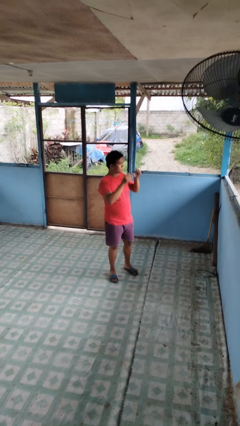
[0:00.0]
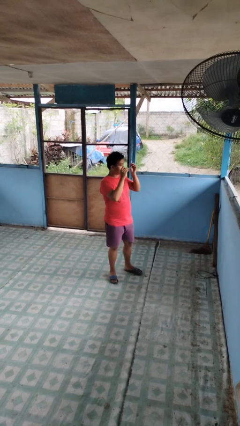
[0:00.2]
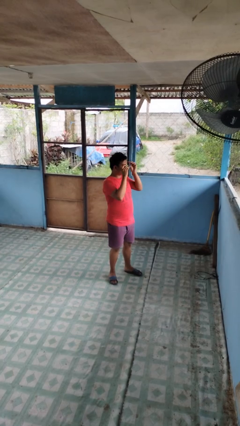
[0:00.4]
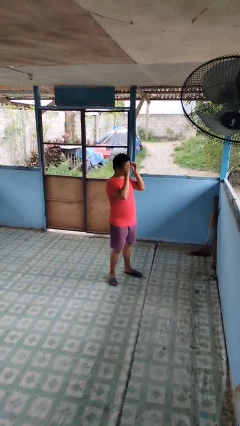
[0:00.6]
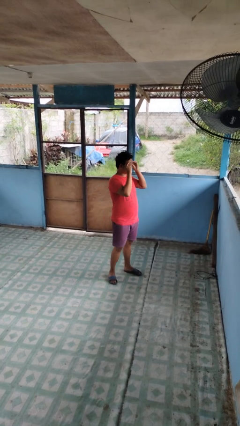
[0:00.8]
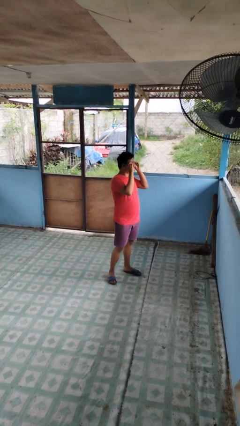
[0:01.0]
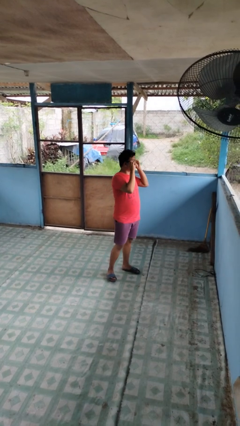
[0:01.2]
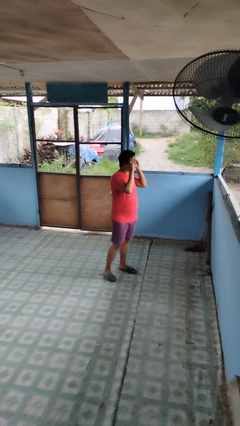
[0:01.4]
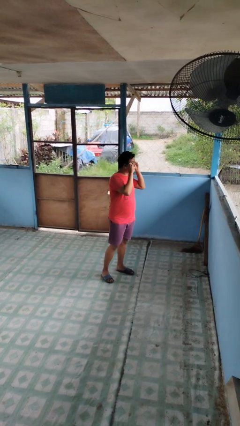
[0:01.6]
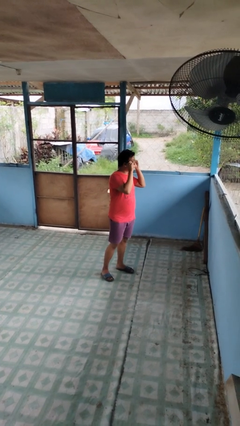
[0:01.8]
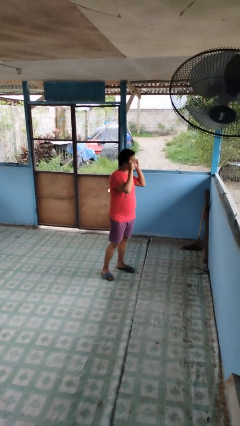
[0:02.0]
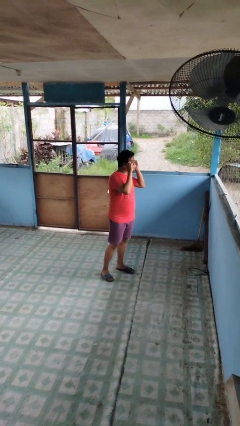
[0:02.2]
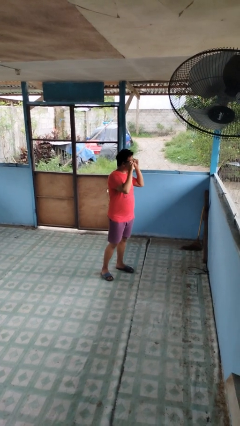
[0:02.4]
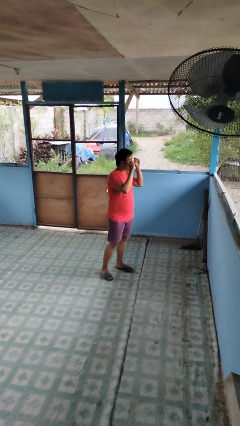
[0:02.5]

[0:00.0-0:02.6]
person puts on glasses

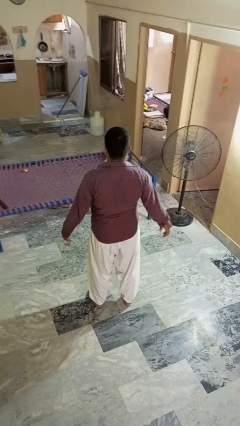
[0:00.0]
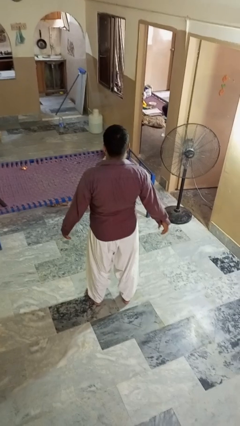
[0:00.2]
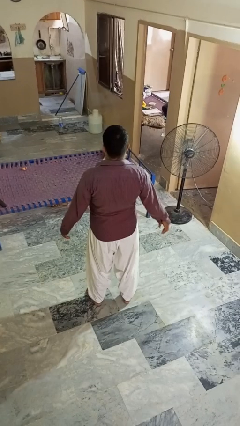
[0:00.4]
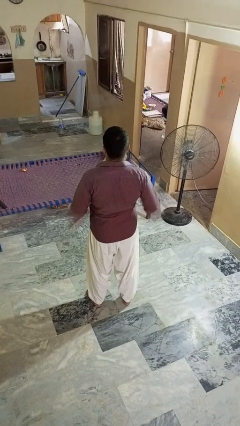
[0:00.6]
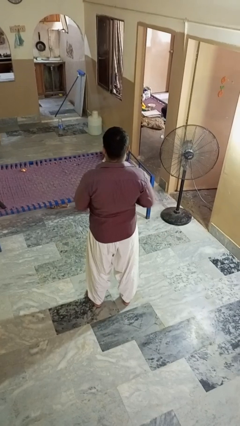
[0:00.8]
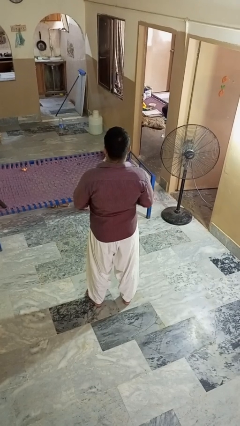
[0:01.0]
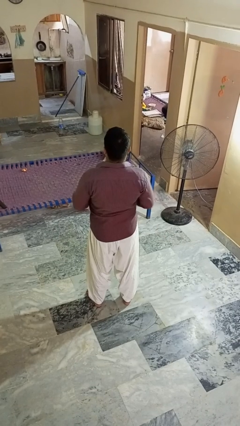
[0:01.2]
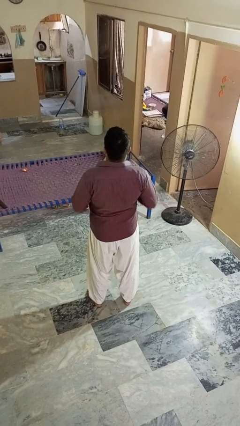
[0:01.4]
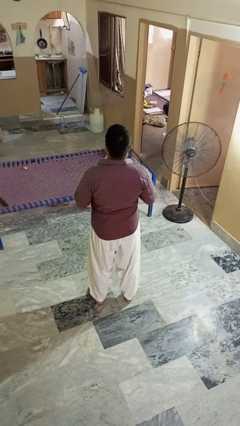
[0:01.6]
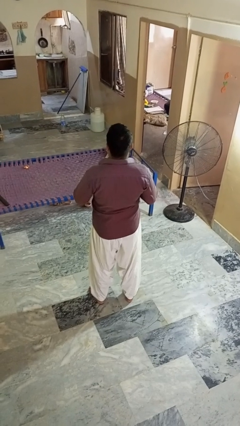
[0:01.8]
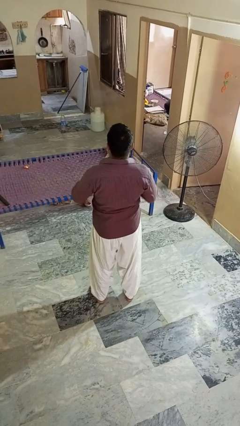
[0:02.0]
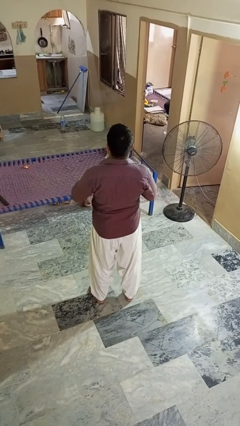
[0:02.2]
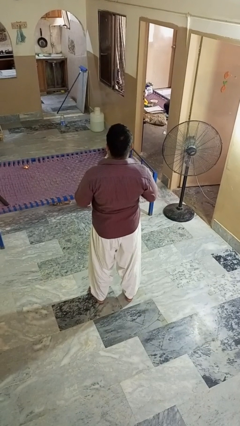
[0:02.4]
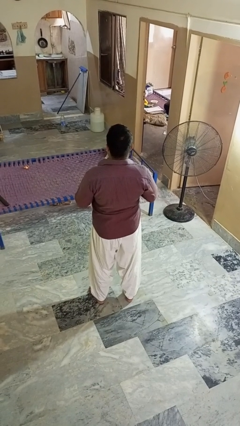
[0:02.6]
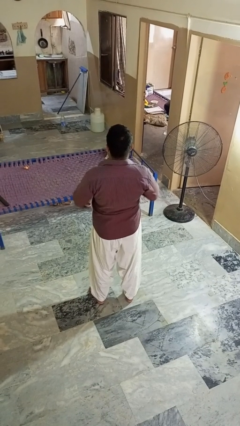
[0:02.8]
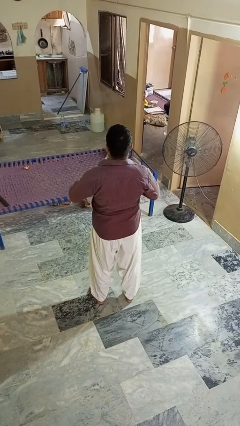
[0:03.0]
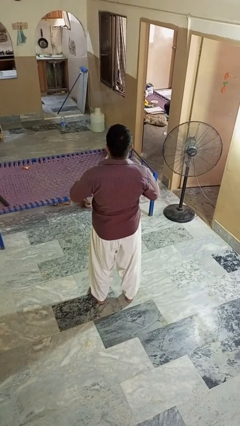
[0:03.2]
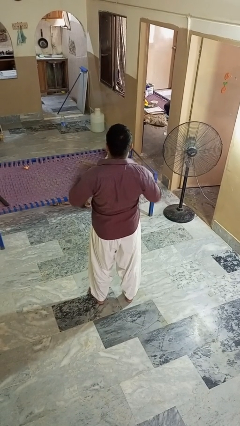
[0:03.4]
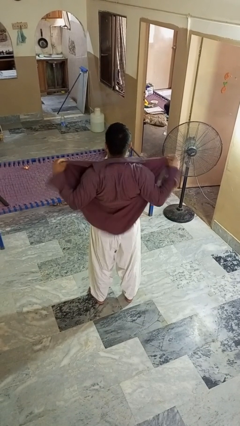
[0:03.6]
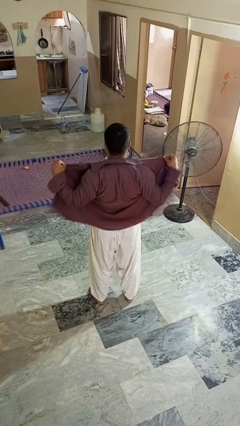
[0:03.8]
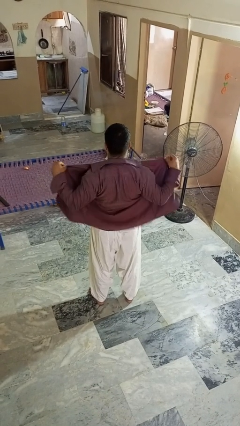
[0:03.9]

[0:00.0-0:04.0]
person unbuttons shirt

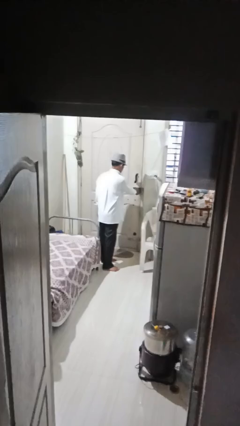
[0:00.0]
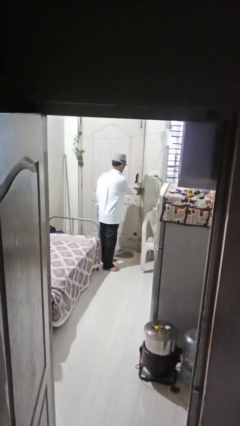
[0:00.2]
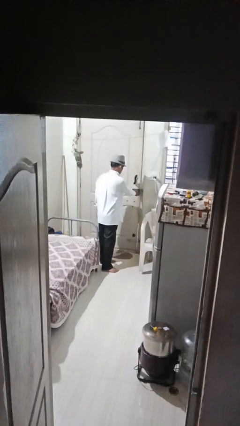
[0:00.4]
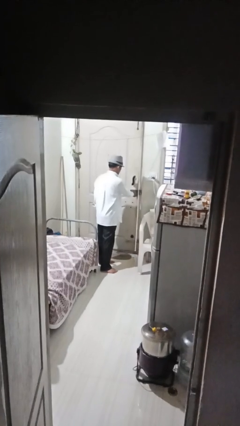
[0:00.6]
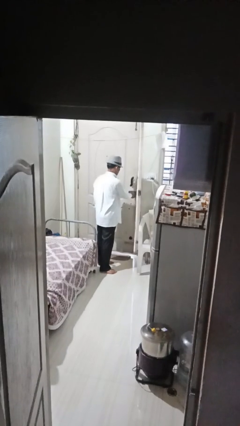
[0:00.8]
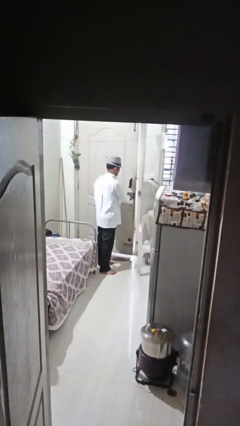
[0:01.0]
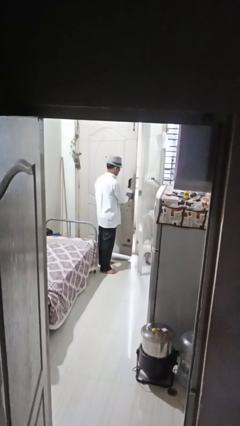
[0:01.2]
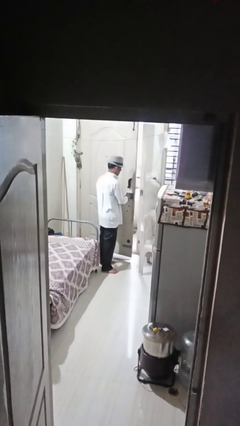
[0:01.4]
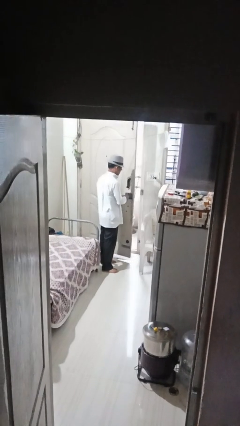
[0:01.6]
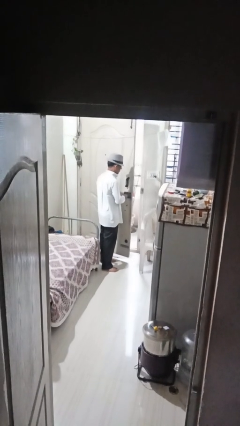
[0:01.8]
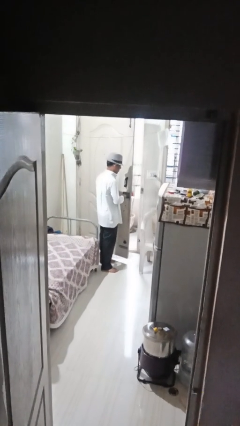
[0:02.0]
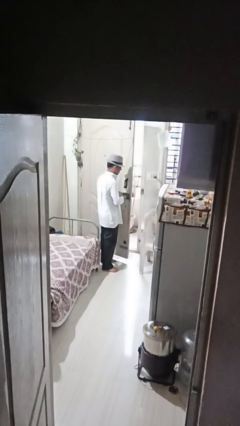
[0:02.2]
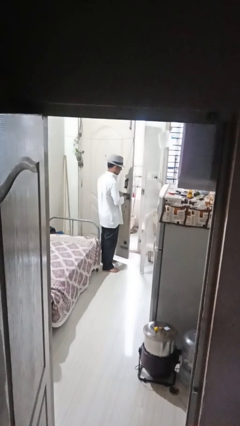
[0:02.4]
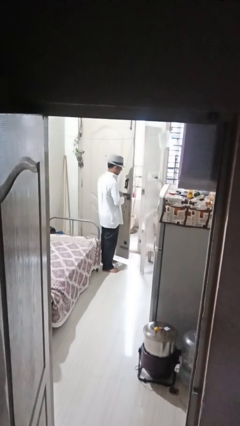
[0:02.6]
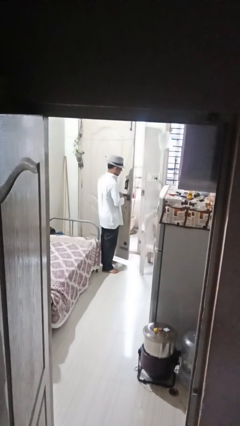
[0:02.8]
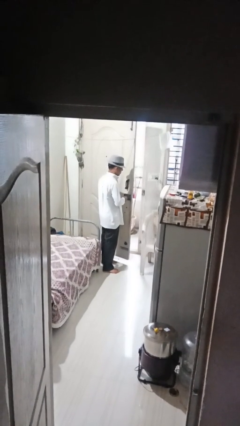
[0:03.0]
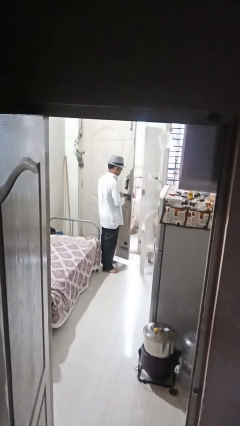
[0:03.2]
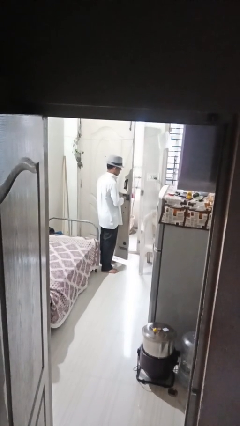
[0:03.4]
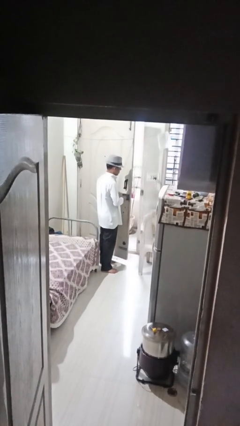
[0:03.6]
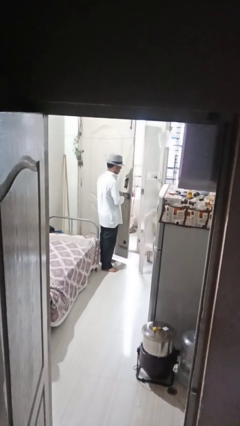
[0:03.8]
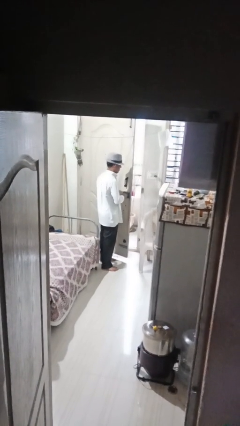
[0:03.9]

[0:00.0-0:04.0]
person opens facility door

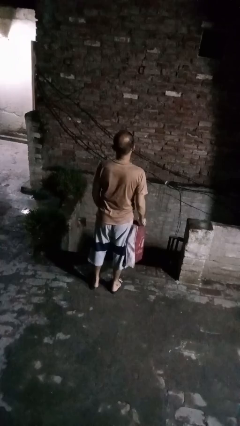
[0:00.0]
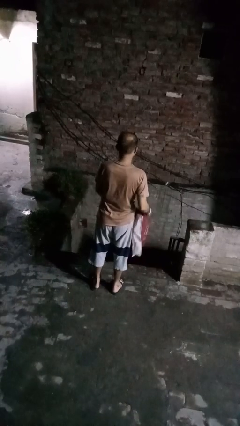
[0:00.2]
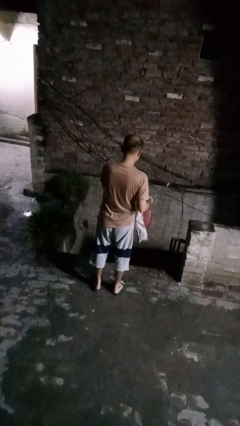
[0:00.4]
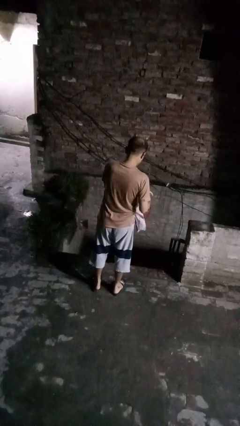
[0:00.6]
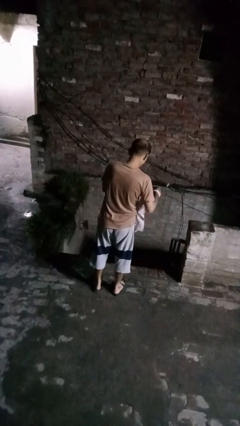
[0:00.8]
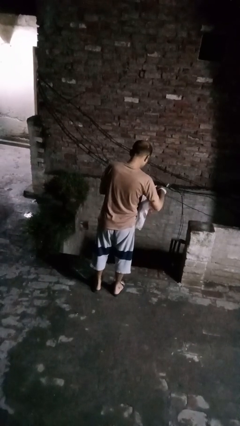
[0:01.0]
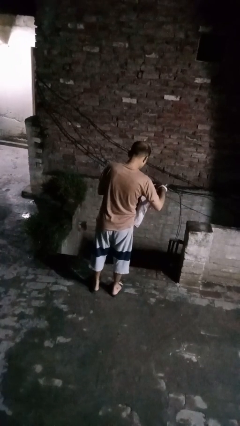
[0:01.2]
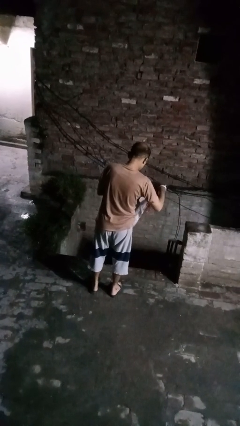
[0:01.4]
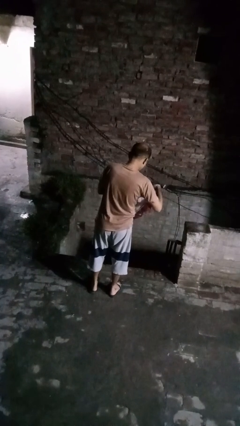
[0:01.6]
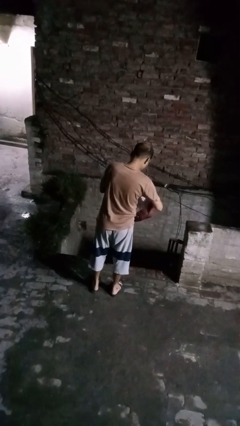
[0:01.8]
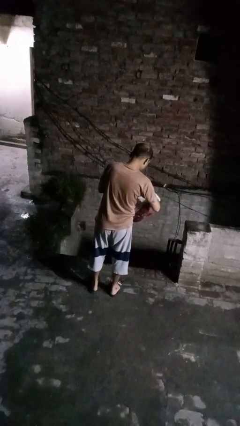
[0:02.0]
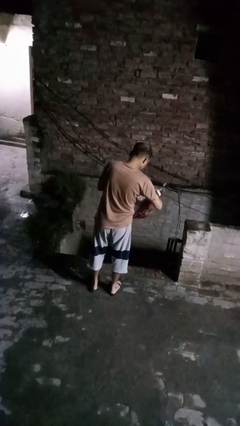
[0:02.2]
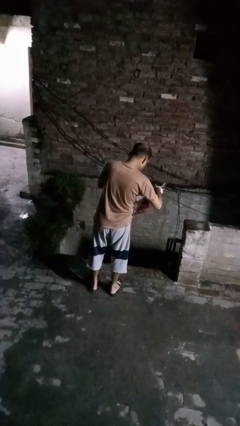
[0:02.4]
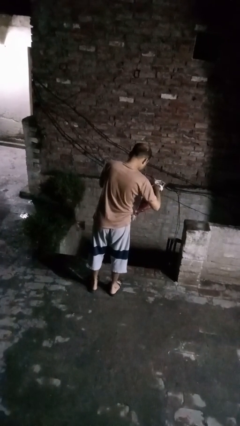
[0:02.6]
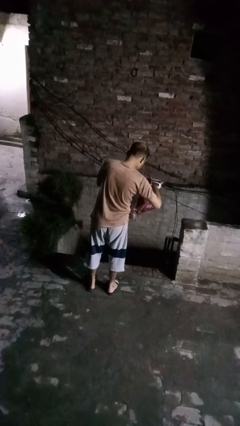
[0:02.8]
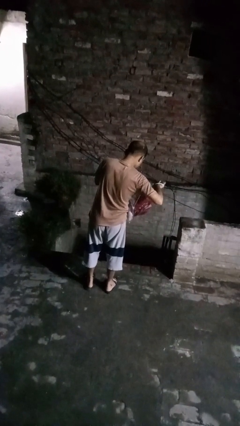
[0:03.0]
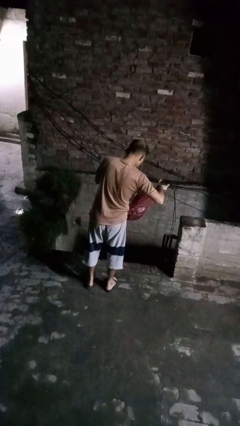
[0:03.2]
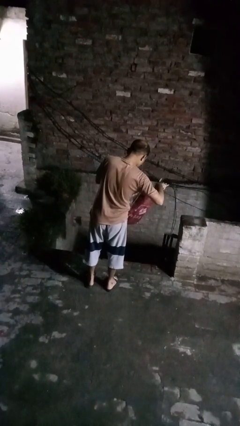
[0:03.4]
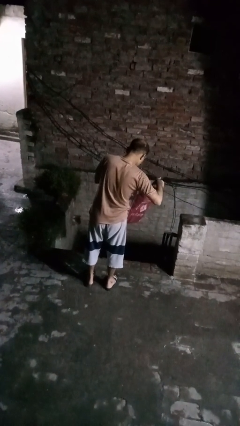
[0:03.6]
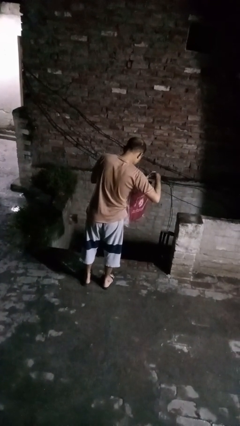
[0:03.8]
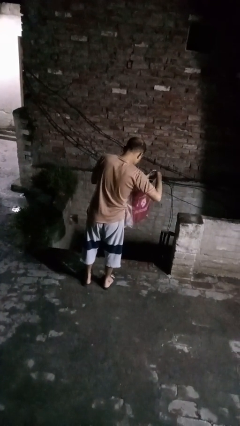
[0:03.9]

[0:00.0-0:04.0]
person searches in bag

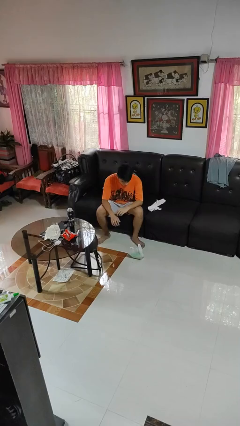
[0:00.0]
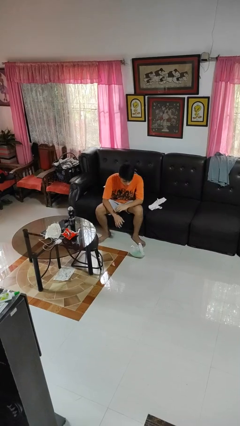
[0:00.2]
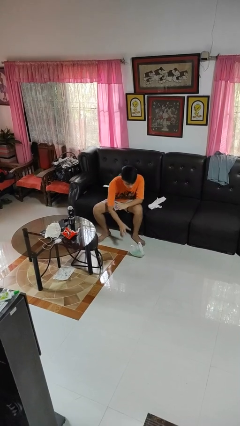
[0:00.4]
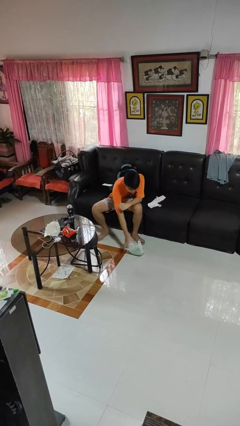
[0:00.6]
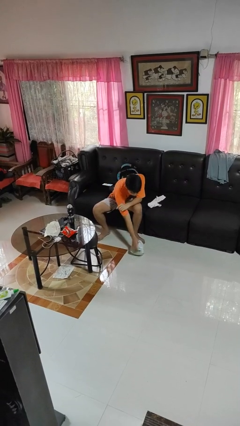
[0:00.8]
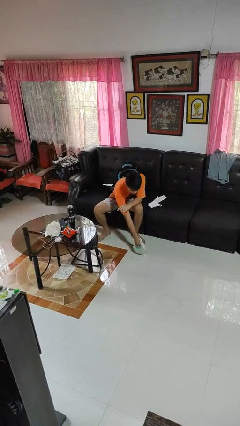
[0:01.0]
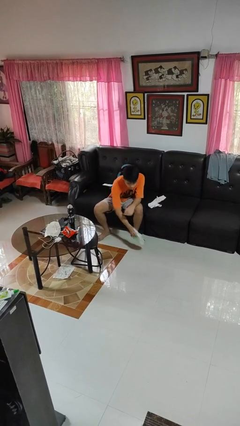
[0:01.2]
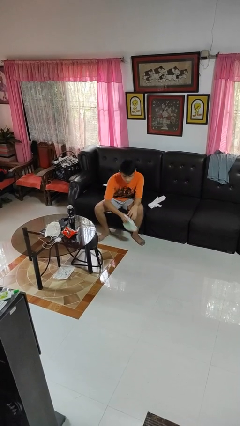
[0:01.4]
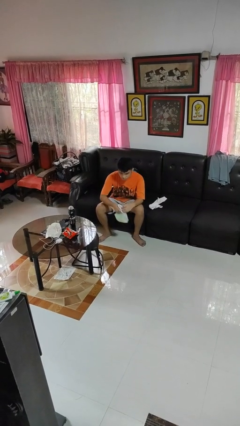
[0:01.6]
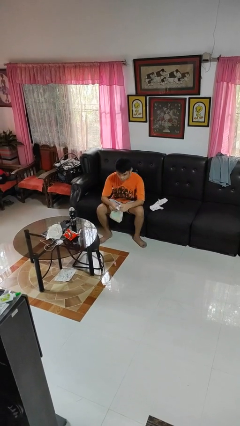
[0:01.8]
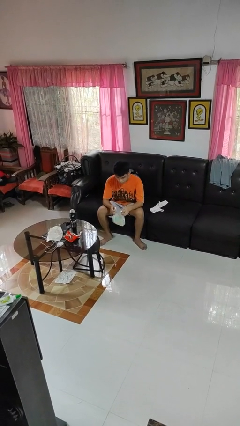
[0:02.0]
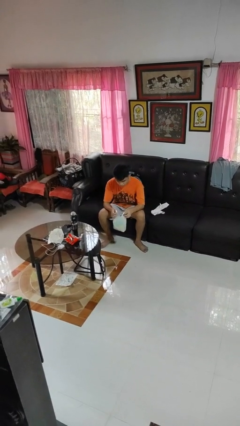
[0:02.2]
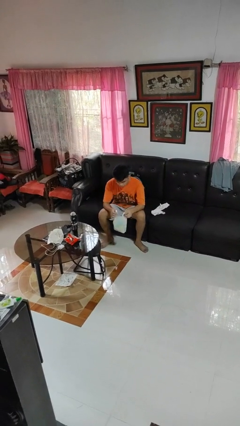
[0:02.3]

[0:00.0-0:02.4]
person picks up object from floor

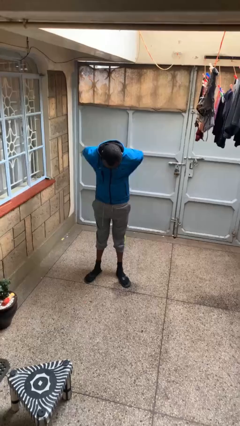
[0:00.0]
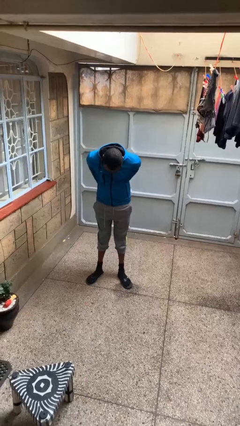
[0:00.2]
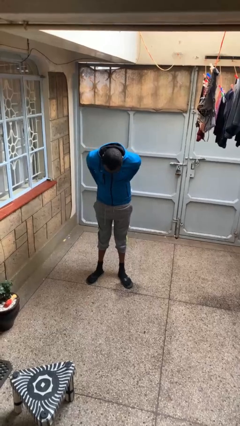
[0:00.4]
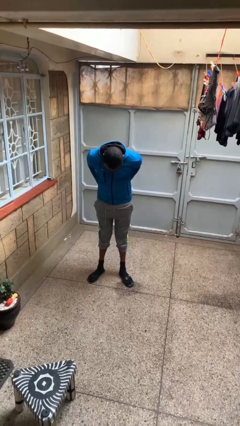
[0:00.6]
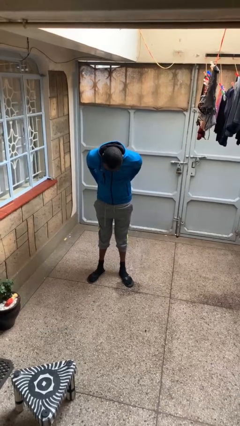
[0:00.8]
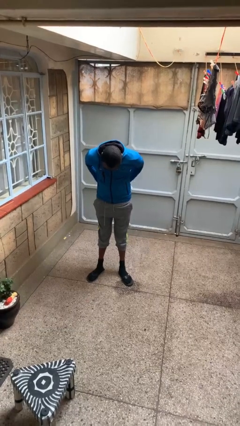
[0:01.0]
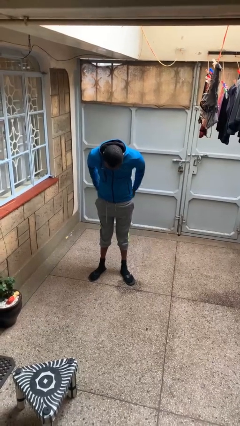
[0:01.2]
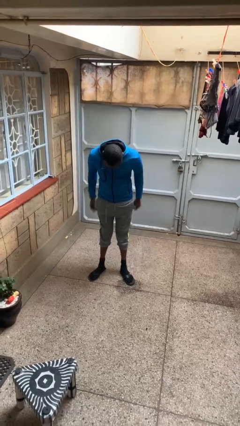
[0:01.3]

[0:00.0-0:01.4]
person puts hands in back pockets
